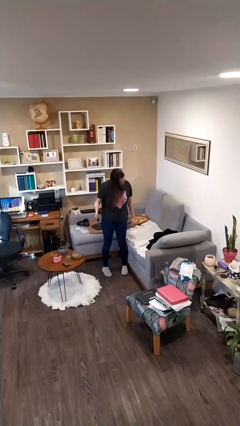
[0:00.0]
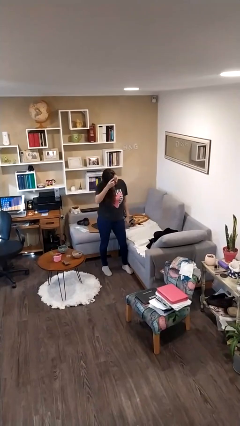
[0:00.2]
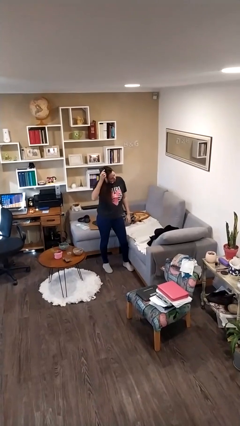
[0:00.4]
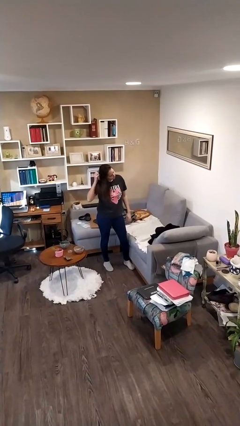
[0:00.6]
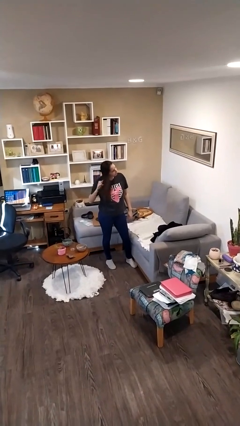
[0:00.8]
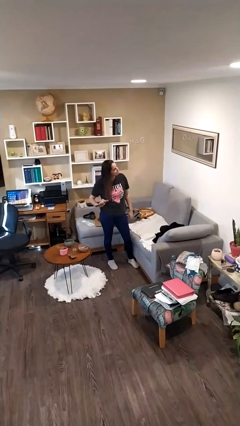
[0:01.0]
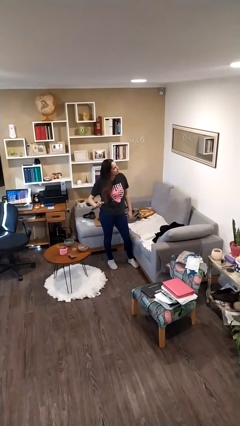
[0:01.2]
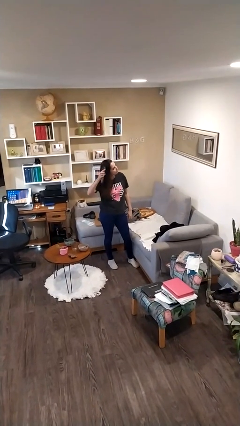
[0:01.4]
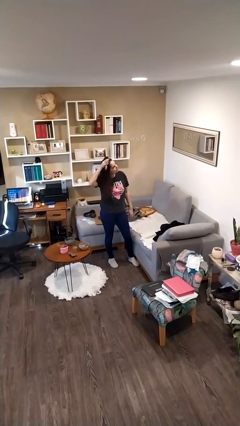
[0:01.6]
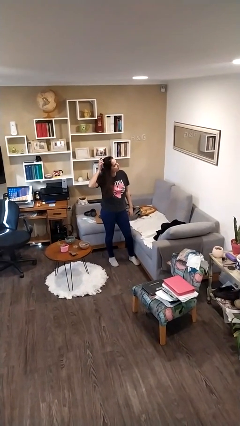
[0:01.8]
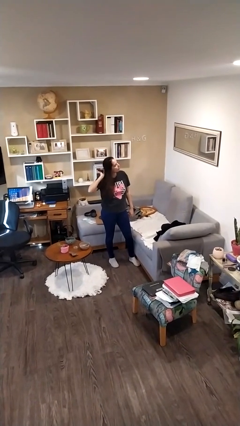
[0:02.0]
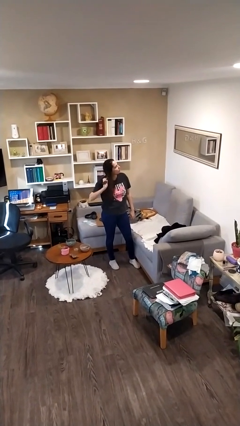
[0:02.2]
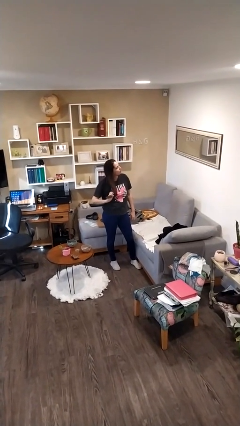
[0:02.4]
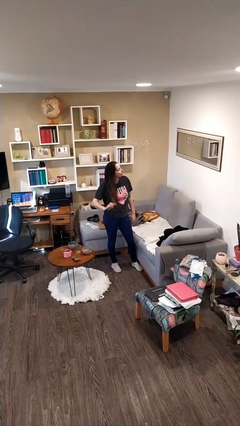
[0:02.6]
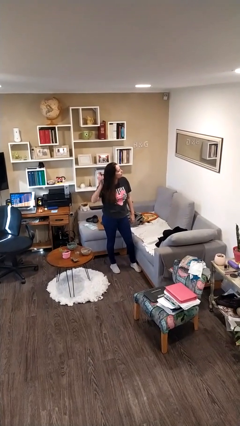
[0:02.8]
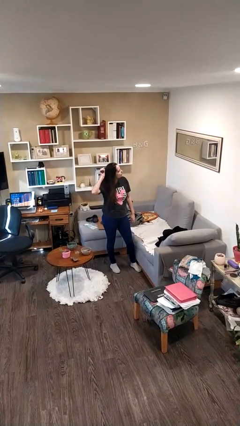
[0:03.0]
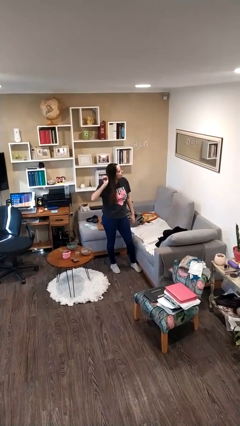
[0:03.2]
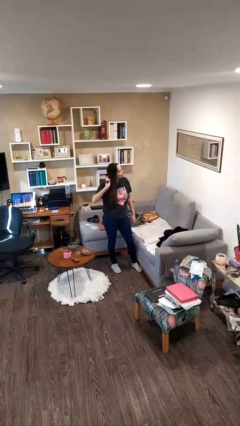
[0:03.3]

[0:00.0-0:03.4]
person brushes hair

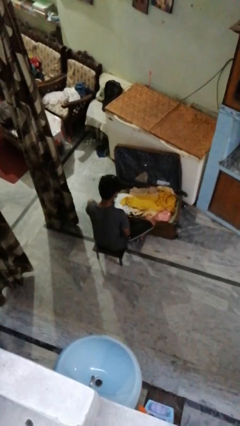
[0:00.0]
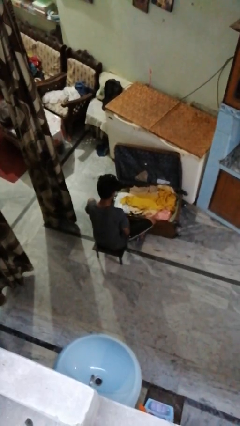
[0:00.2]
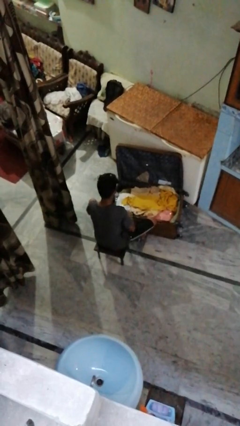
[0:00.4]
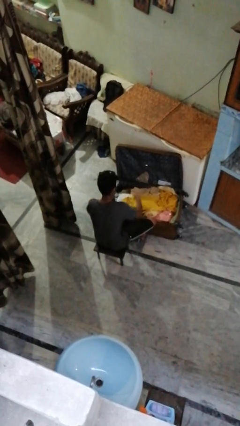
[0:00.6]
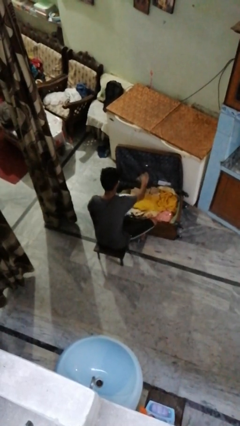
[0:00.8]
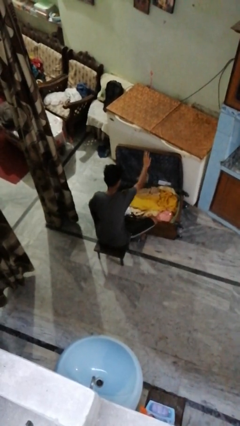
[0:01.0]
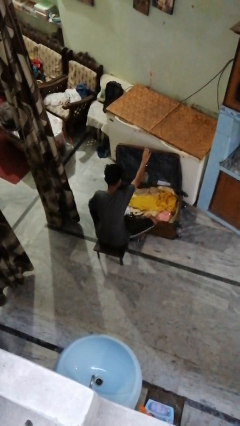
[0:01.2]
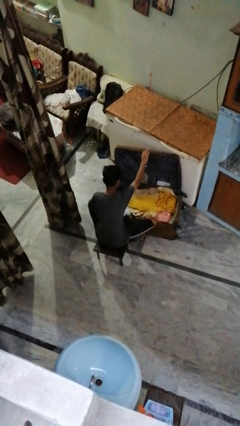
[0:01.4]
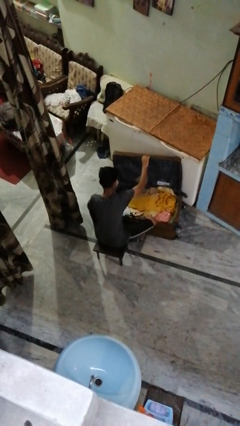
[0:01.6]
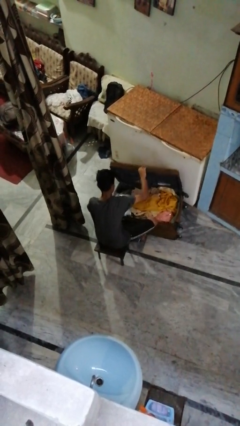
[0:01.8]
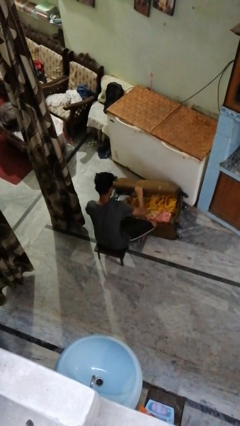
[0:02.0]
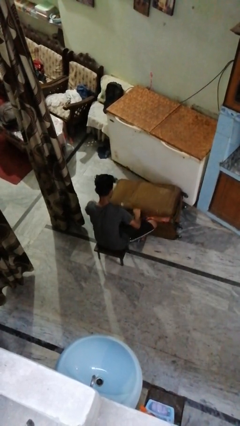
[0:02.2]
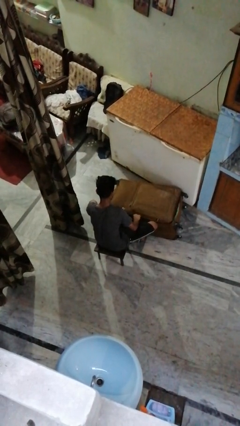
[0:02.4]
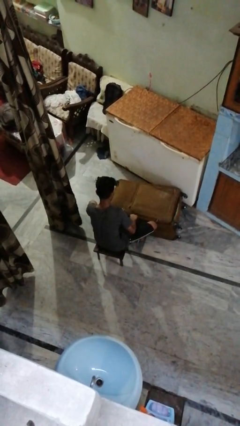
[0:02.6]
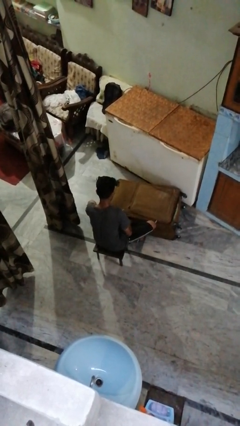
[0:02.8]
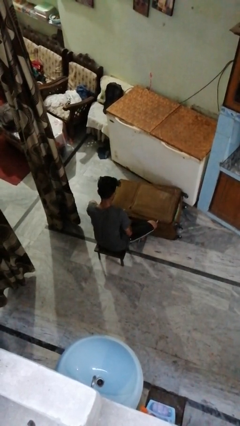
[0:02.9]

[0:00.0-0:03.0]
person closes suitcase

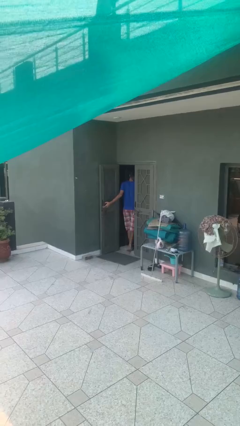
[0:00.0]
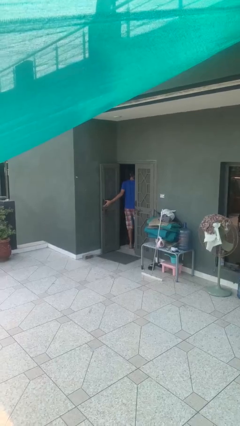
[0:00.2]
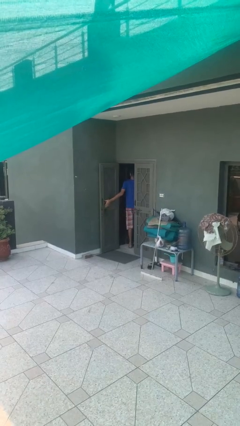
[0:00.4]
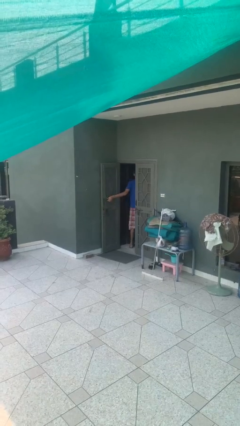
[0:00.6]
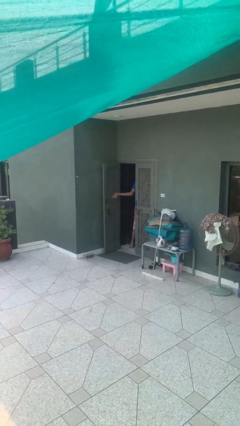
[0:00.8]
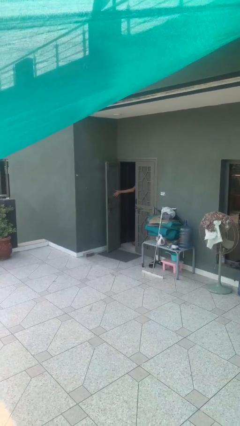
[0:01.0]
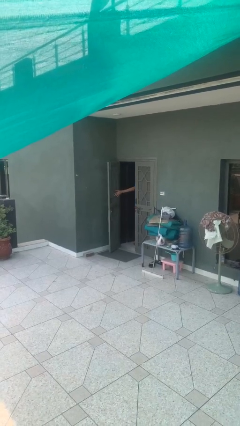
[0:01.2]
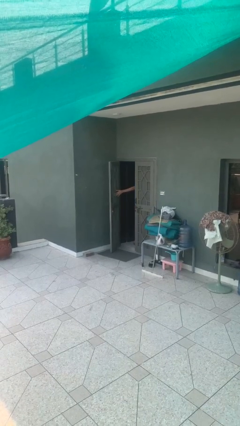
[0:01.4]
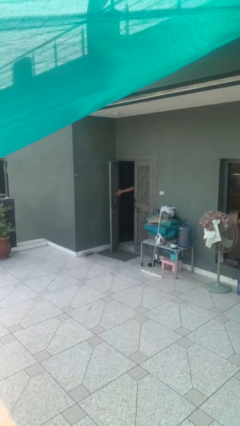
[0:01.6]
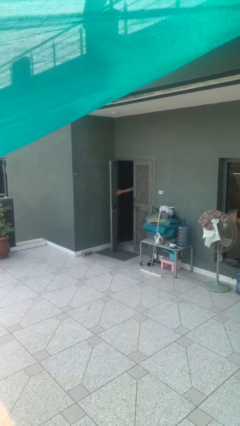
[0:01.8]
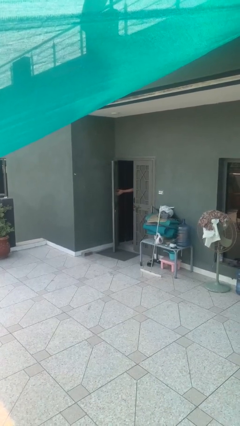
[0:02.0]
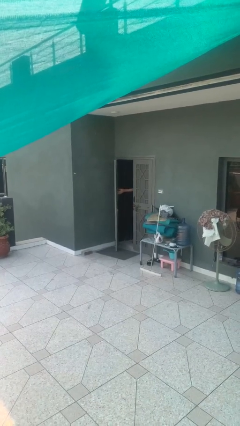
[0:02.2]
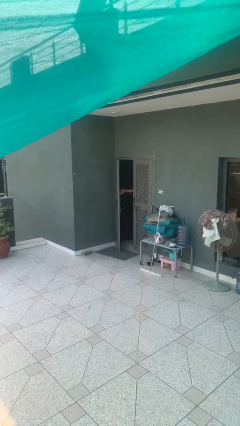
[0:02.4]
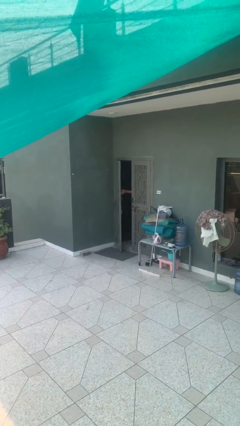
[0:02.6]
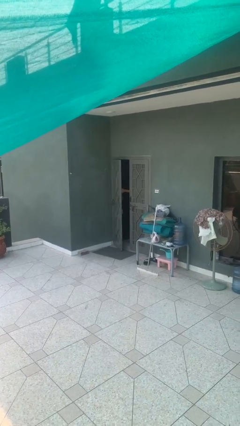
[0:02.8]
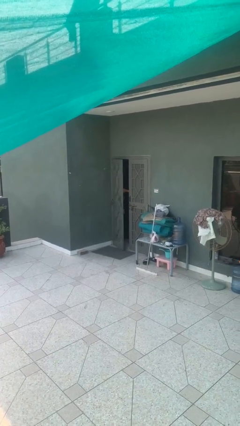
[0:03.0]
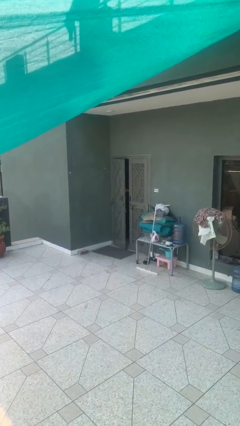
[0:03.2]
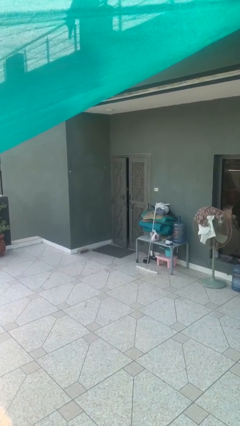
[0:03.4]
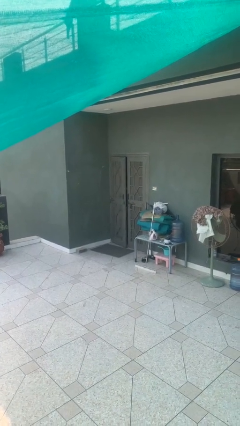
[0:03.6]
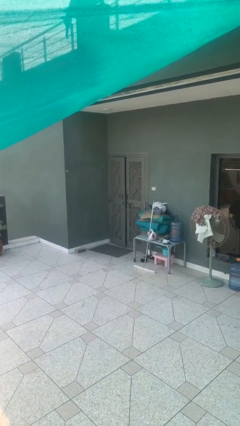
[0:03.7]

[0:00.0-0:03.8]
person closes facility door

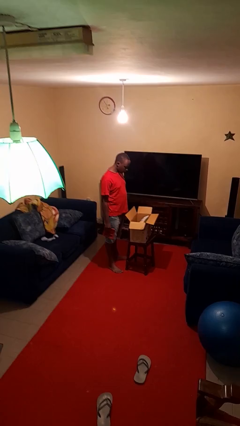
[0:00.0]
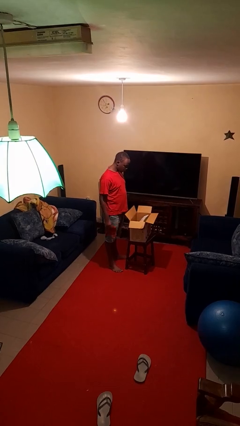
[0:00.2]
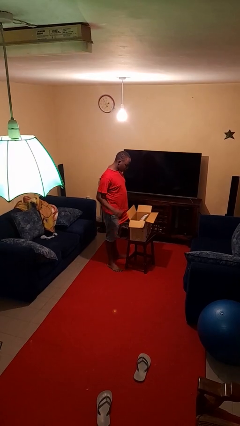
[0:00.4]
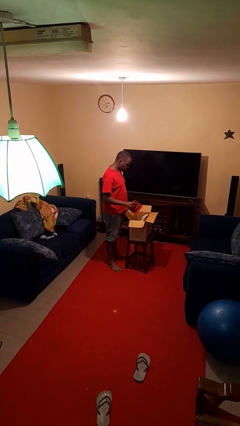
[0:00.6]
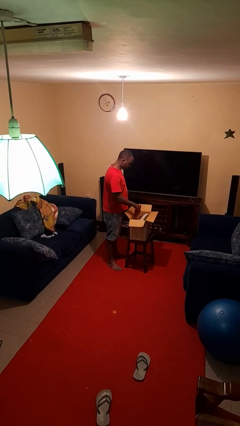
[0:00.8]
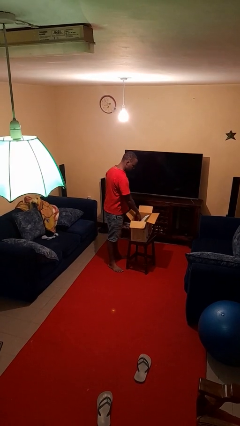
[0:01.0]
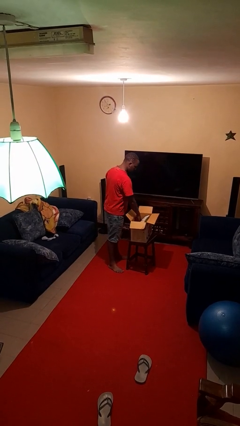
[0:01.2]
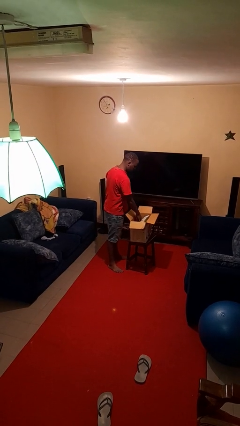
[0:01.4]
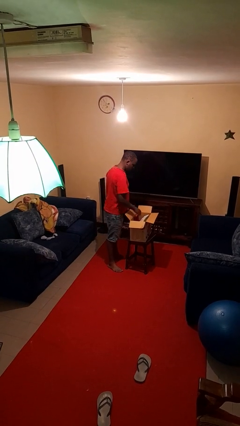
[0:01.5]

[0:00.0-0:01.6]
person puts object into box

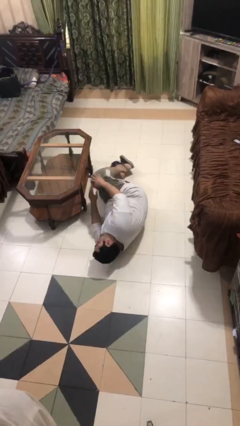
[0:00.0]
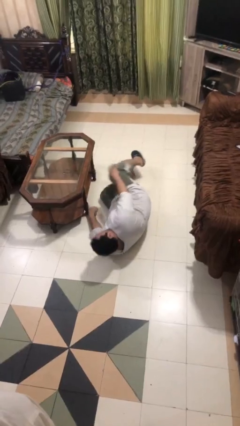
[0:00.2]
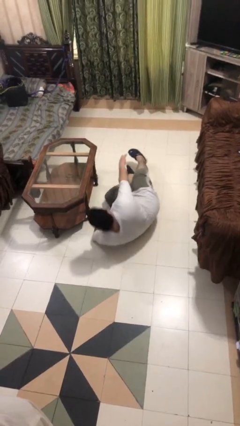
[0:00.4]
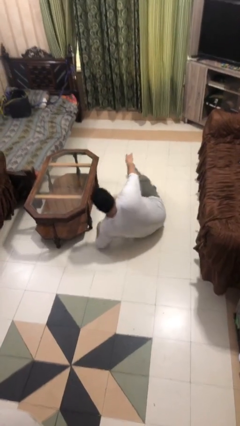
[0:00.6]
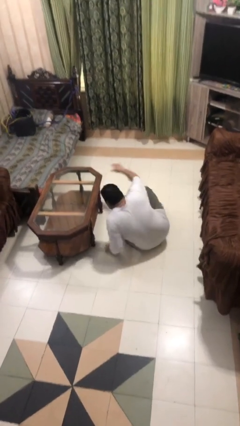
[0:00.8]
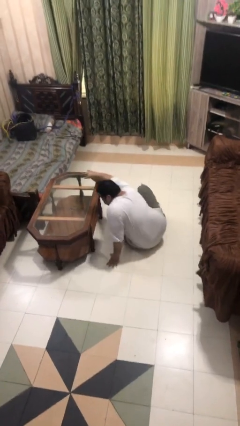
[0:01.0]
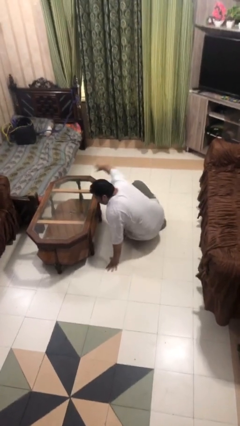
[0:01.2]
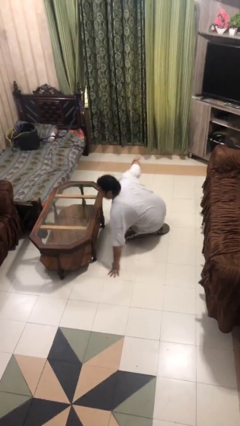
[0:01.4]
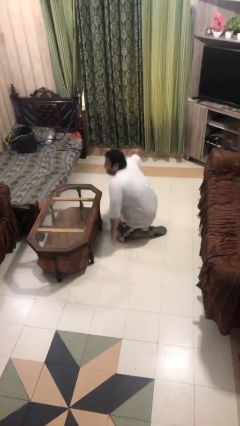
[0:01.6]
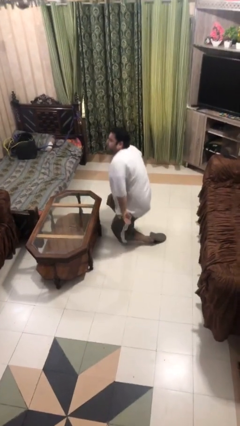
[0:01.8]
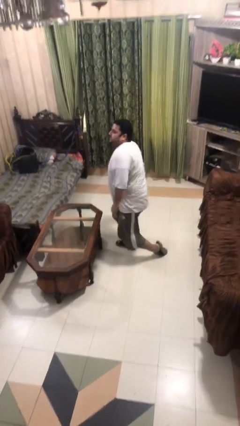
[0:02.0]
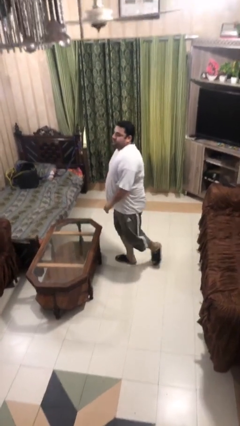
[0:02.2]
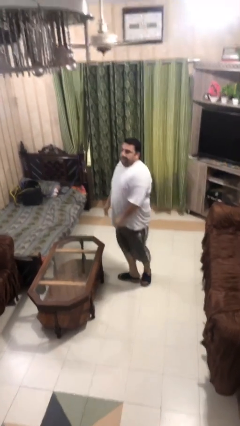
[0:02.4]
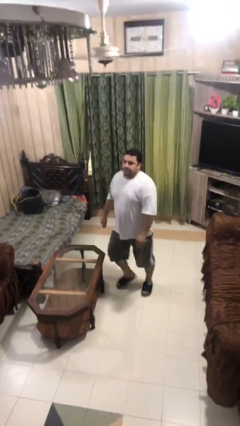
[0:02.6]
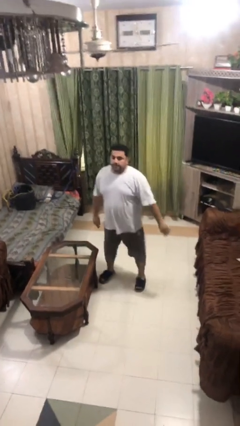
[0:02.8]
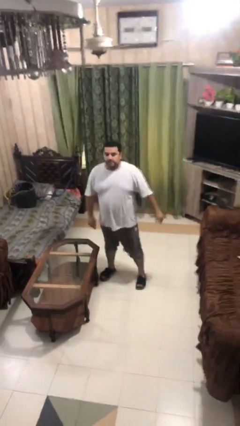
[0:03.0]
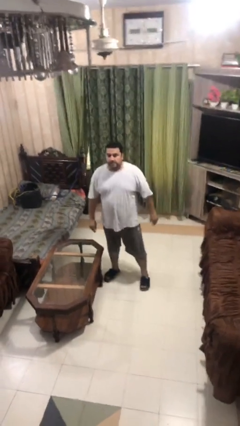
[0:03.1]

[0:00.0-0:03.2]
person stands up from floor

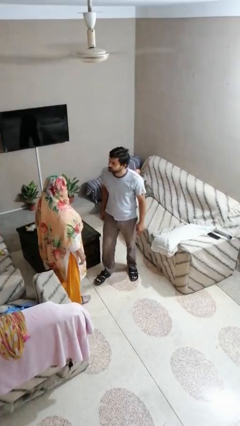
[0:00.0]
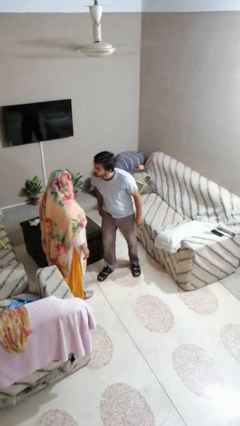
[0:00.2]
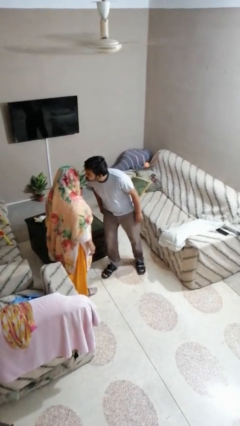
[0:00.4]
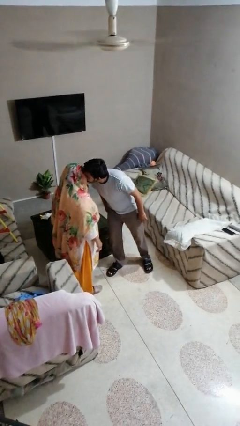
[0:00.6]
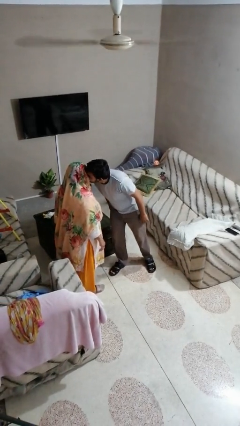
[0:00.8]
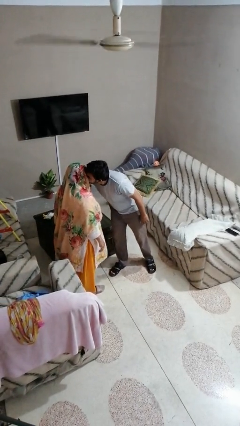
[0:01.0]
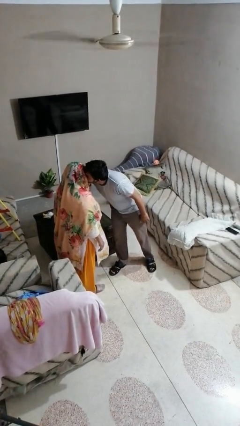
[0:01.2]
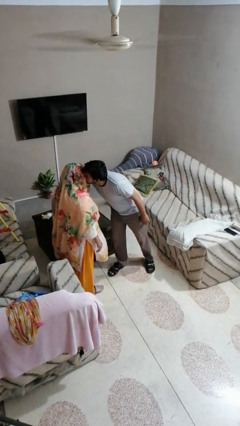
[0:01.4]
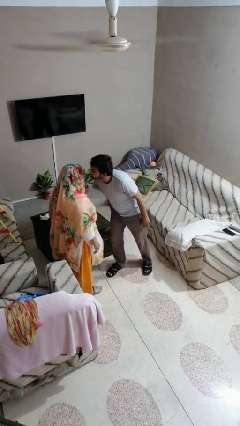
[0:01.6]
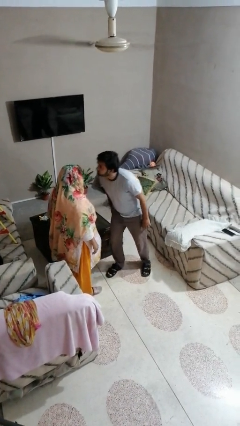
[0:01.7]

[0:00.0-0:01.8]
person kisses cheek of person

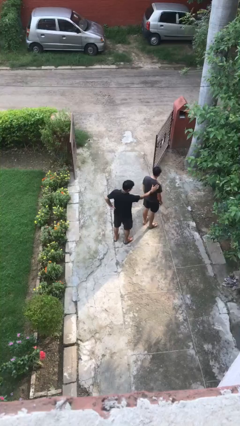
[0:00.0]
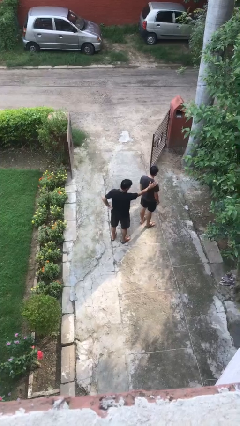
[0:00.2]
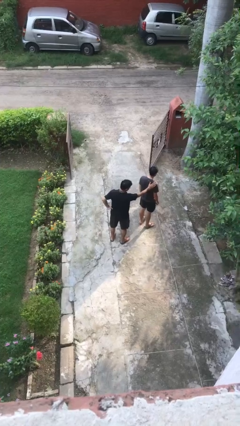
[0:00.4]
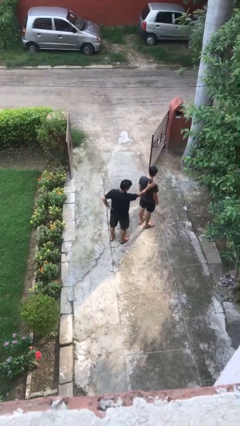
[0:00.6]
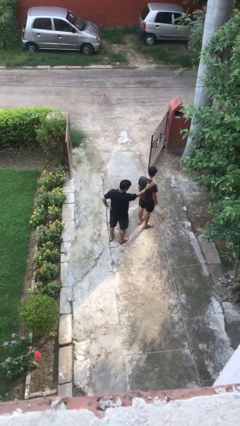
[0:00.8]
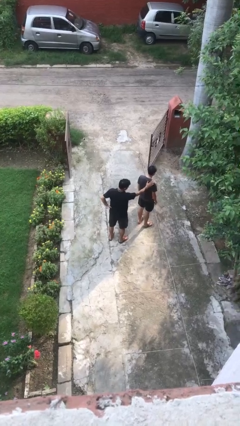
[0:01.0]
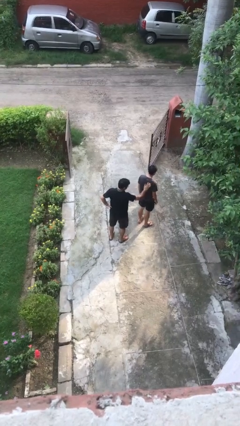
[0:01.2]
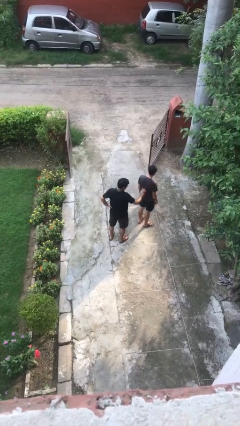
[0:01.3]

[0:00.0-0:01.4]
person touches back of person
